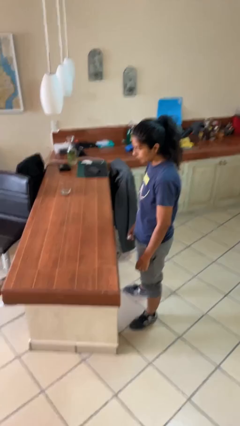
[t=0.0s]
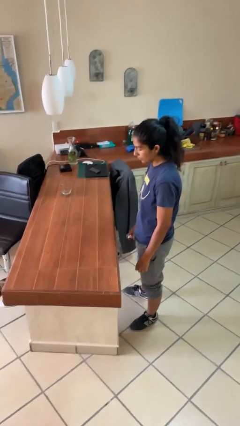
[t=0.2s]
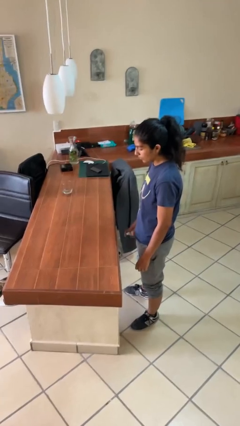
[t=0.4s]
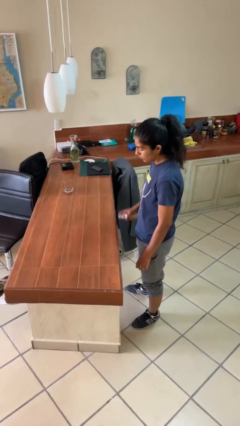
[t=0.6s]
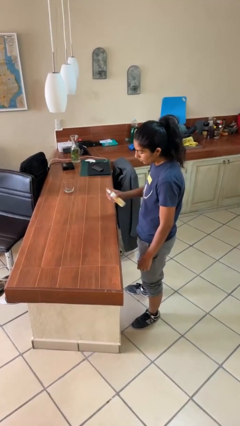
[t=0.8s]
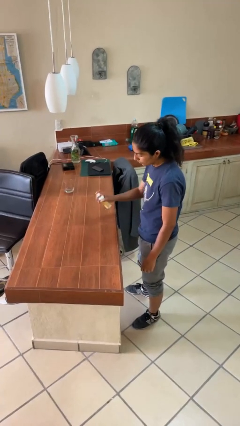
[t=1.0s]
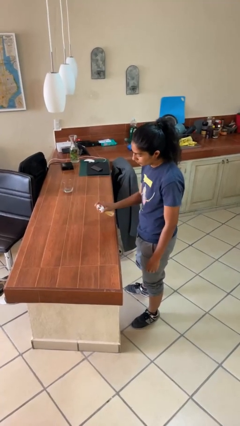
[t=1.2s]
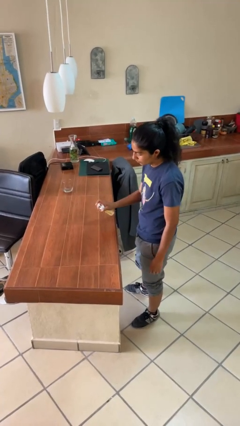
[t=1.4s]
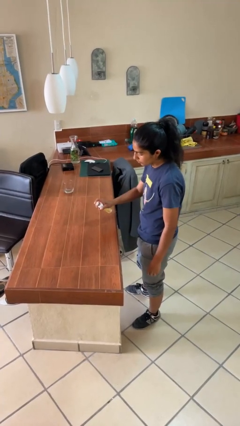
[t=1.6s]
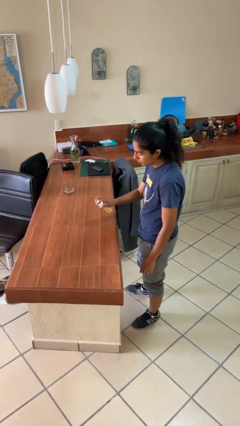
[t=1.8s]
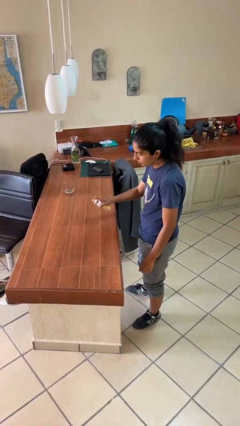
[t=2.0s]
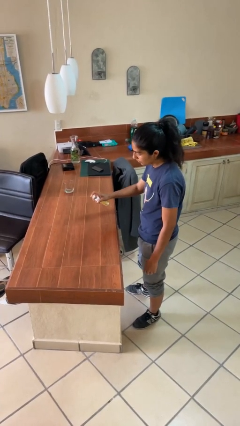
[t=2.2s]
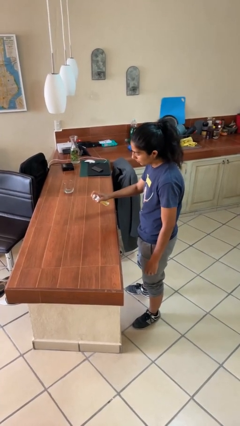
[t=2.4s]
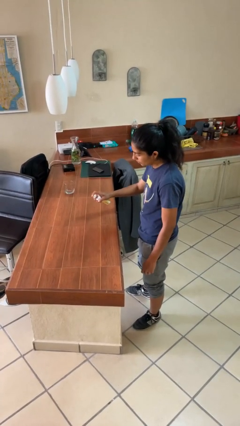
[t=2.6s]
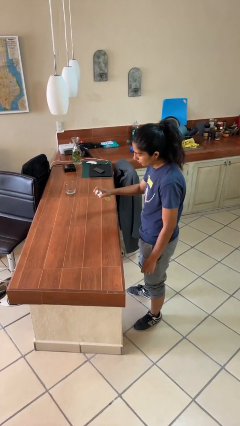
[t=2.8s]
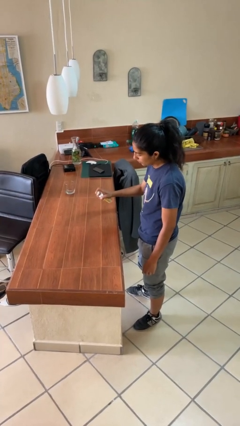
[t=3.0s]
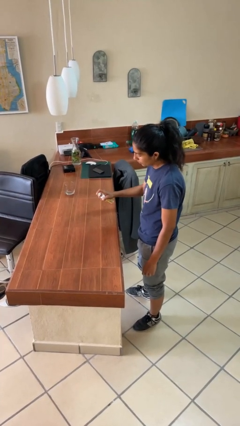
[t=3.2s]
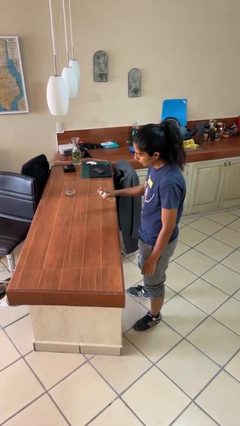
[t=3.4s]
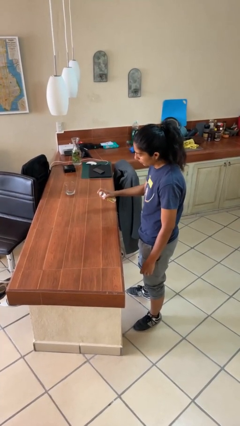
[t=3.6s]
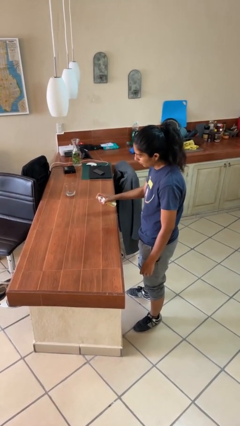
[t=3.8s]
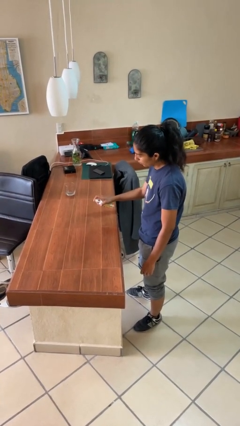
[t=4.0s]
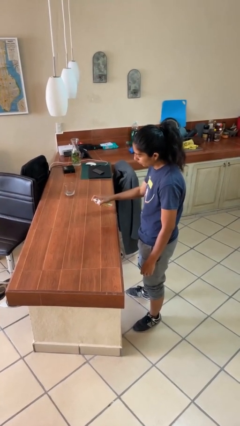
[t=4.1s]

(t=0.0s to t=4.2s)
person sprays from bottle

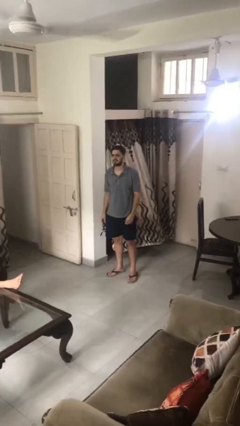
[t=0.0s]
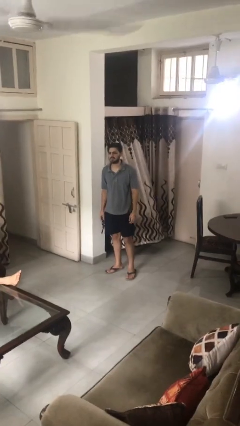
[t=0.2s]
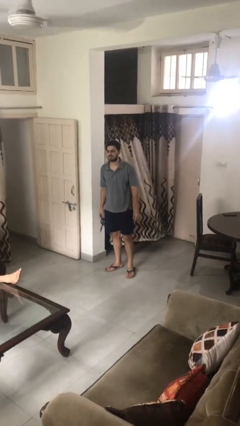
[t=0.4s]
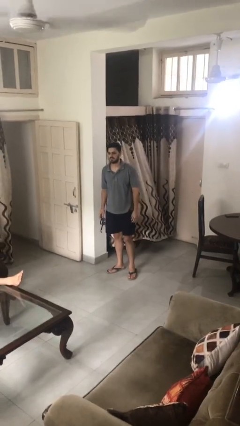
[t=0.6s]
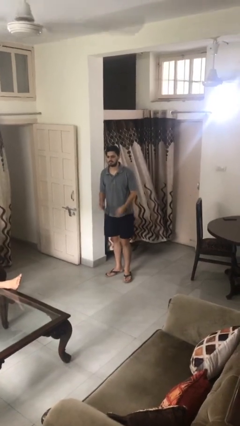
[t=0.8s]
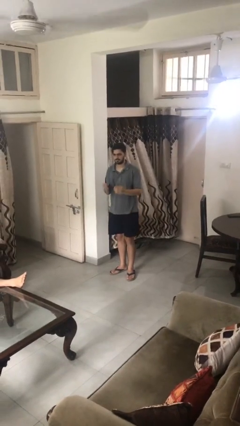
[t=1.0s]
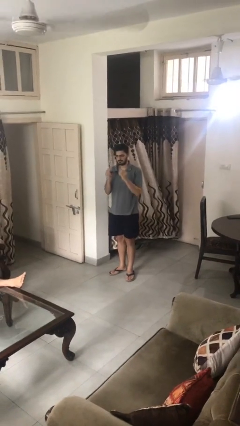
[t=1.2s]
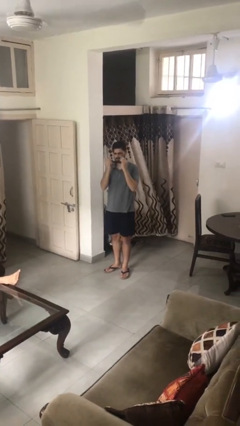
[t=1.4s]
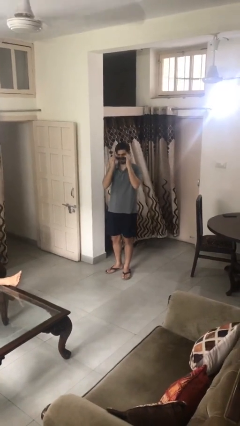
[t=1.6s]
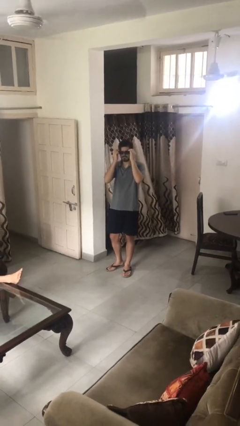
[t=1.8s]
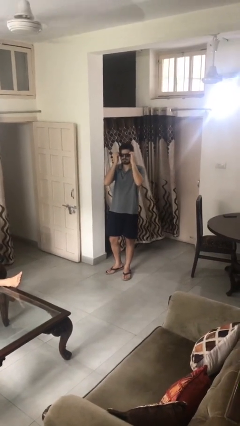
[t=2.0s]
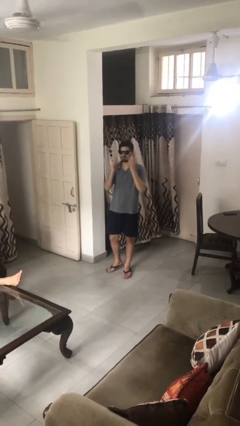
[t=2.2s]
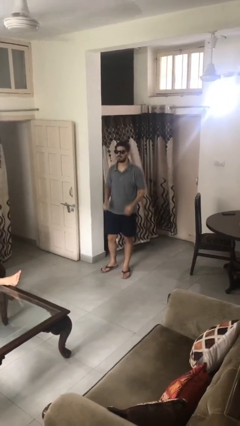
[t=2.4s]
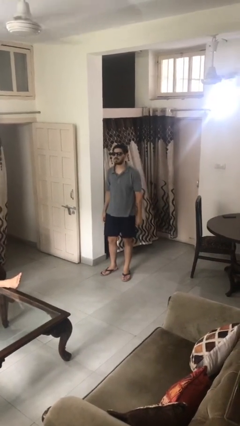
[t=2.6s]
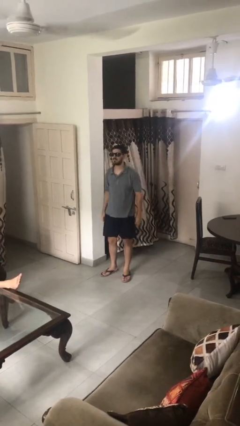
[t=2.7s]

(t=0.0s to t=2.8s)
person puts on sunglasses

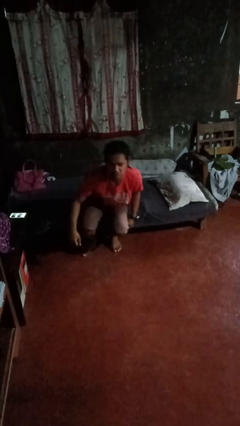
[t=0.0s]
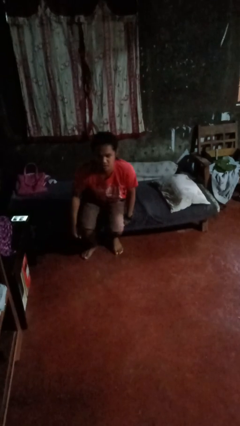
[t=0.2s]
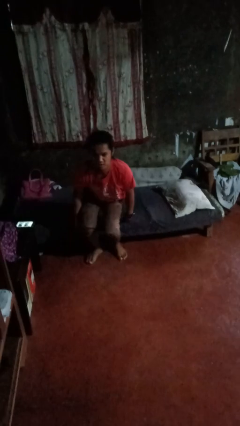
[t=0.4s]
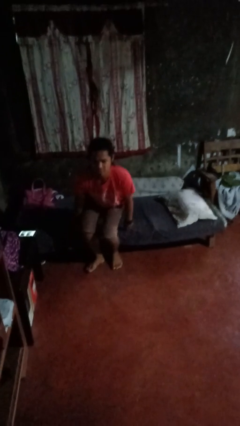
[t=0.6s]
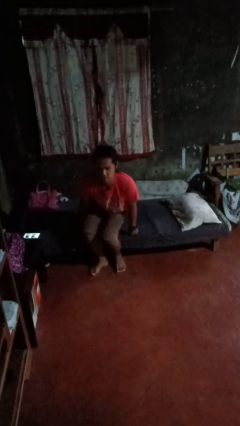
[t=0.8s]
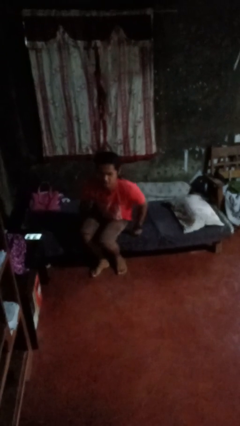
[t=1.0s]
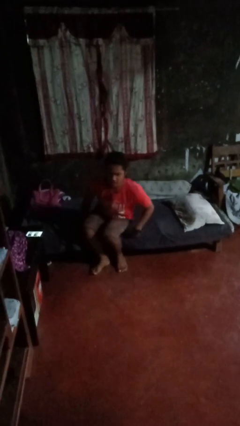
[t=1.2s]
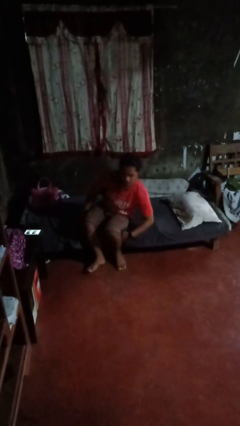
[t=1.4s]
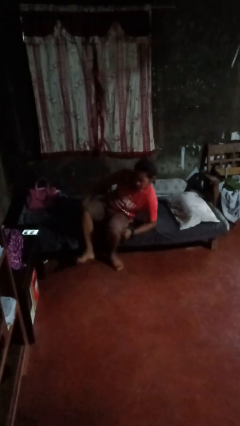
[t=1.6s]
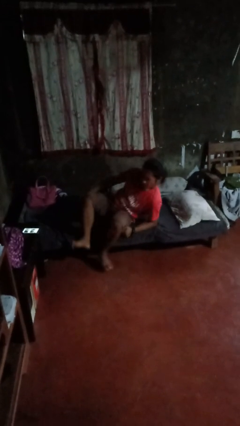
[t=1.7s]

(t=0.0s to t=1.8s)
person stands up from floor

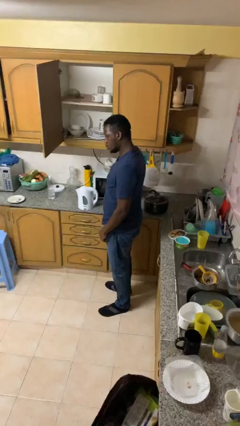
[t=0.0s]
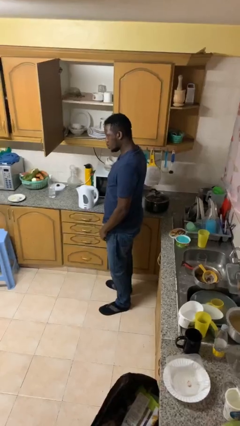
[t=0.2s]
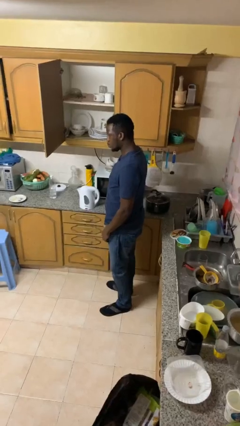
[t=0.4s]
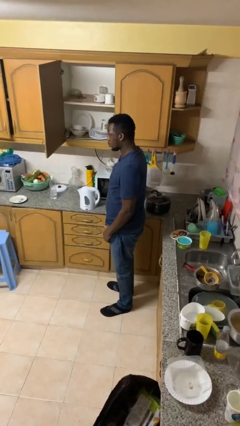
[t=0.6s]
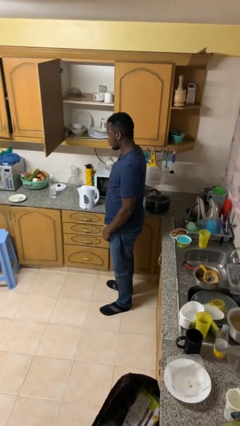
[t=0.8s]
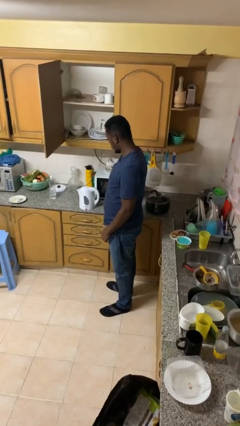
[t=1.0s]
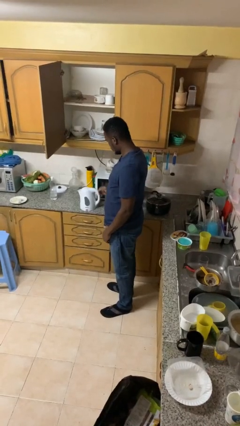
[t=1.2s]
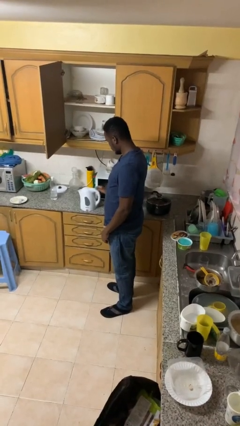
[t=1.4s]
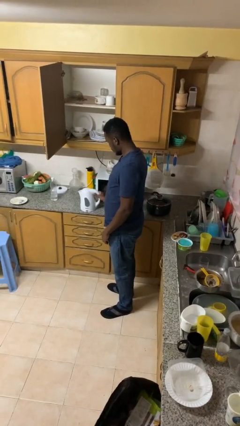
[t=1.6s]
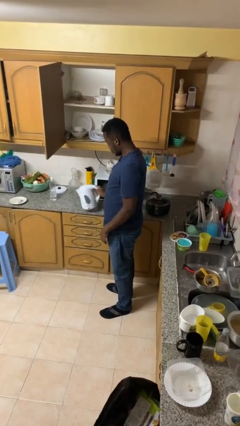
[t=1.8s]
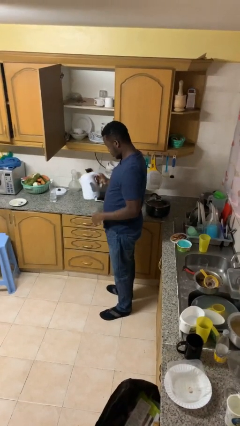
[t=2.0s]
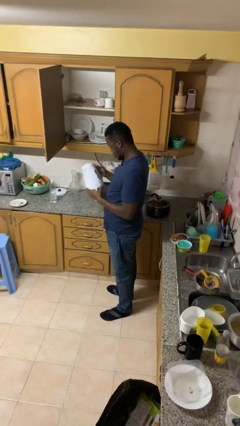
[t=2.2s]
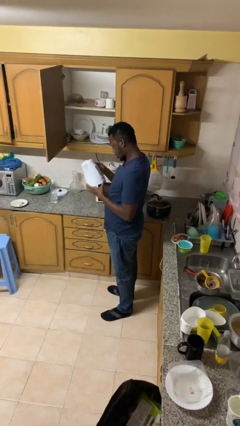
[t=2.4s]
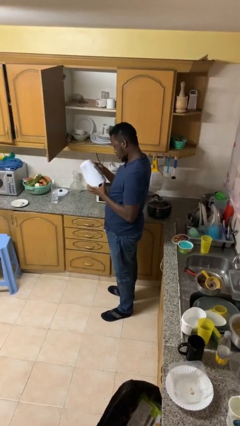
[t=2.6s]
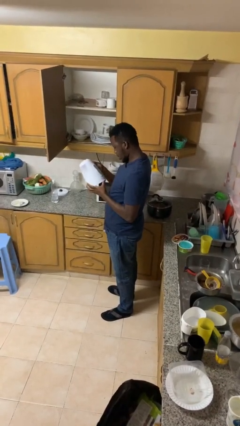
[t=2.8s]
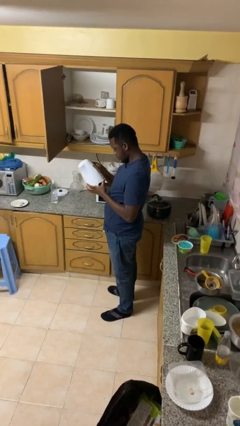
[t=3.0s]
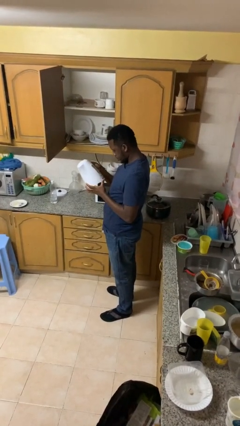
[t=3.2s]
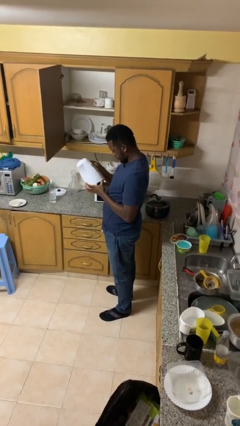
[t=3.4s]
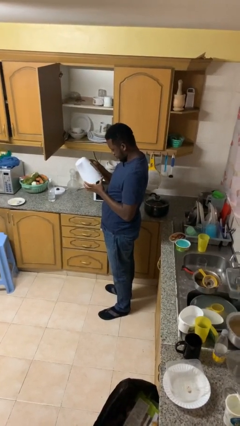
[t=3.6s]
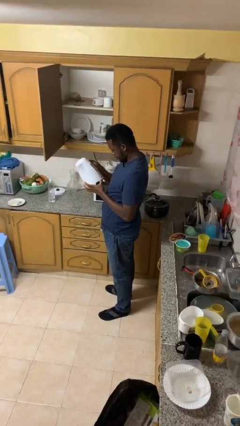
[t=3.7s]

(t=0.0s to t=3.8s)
person picks up object from table

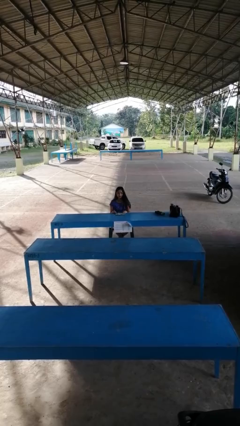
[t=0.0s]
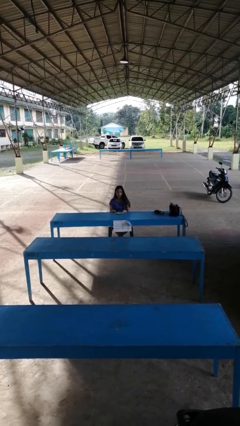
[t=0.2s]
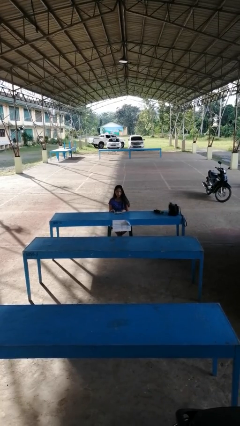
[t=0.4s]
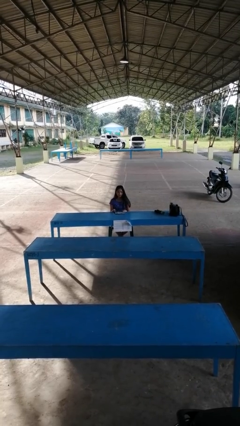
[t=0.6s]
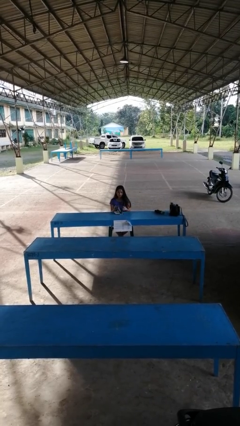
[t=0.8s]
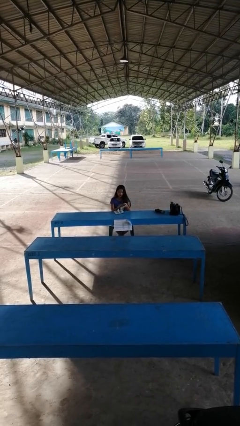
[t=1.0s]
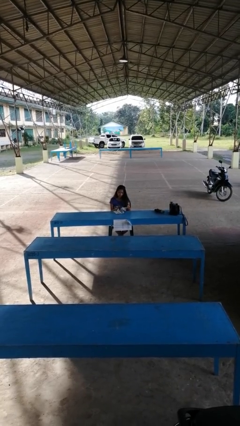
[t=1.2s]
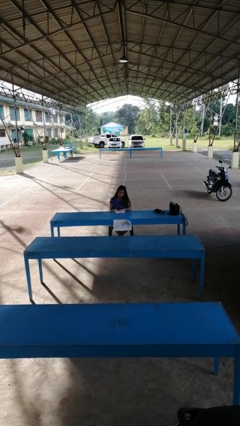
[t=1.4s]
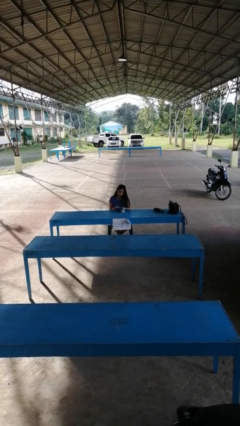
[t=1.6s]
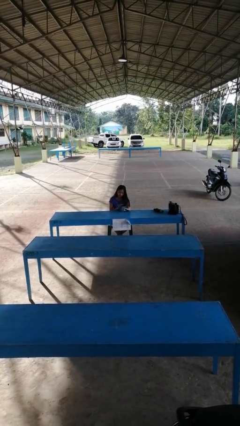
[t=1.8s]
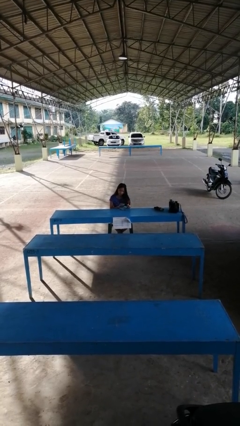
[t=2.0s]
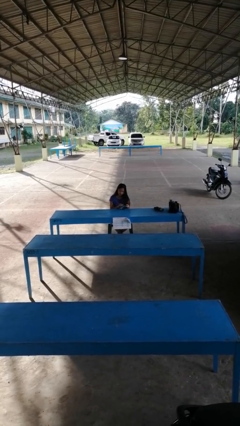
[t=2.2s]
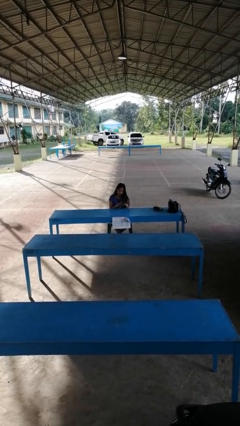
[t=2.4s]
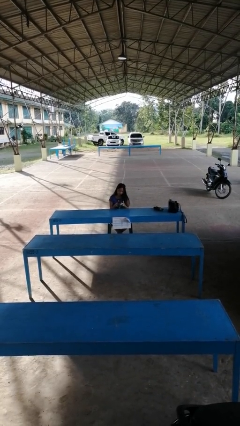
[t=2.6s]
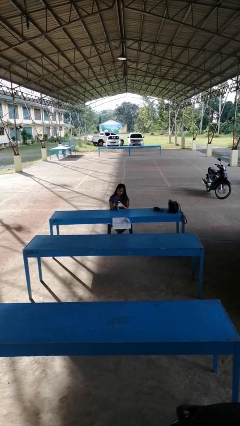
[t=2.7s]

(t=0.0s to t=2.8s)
person reads magazine

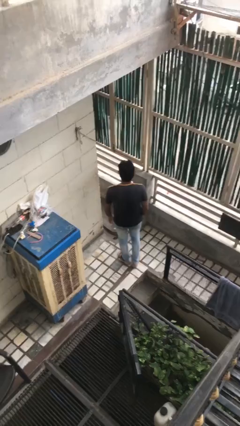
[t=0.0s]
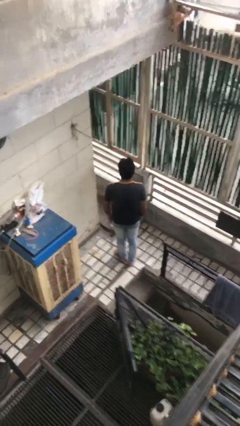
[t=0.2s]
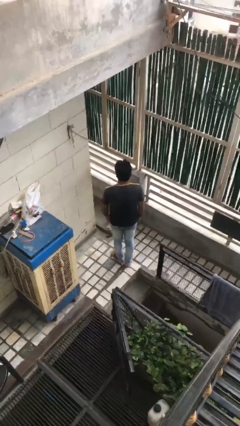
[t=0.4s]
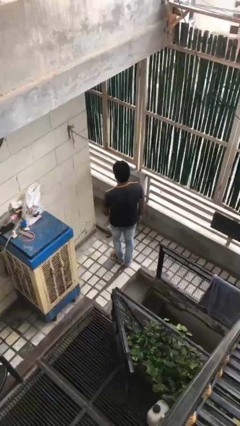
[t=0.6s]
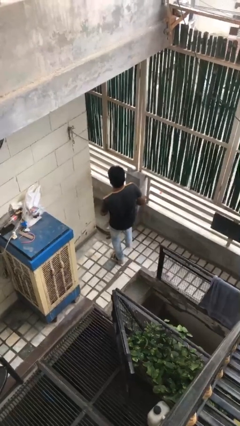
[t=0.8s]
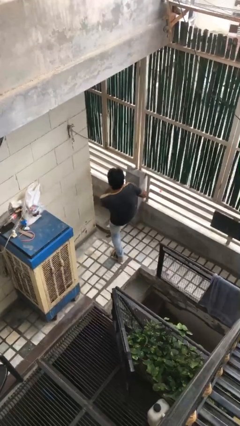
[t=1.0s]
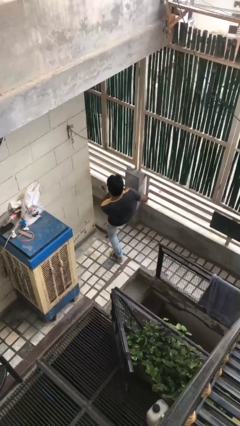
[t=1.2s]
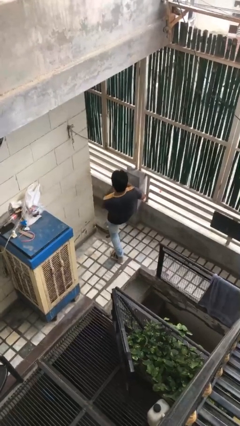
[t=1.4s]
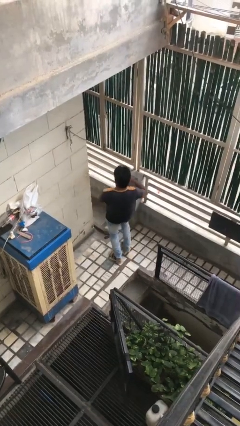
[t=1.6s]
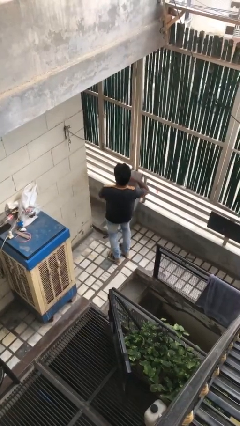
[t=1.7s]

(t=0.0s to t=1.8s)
person karate kicks
